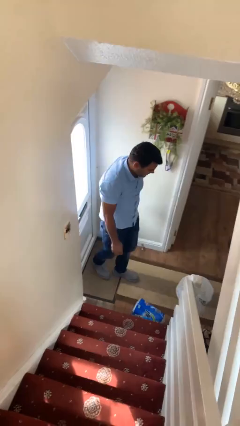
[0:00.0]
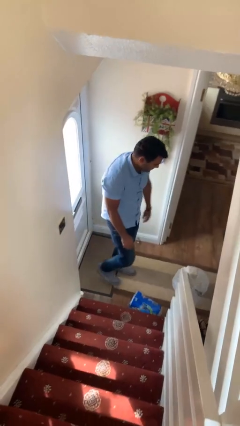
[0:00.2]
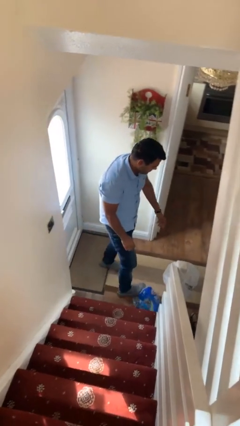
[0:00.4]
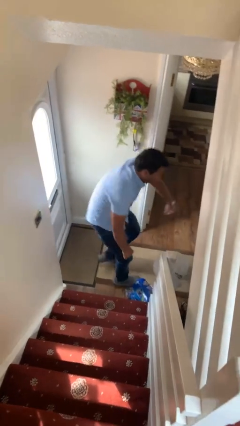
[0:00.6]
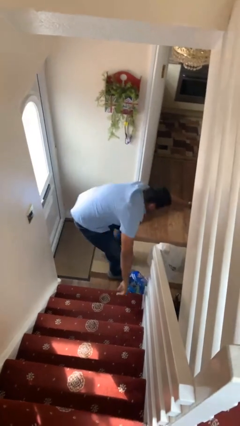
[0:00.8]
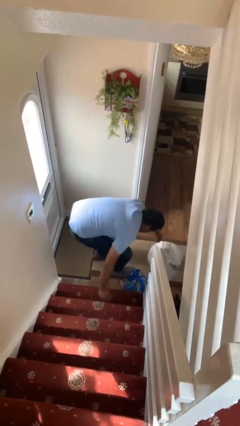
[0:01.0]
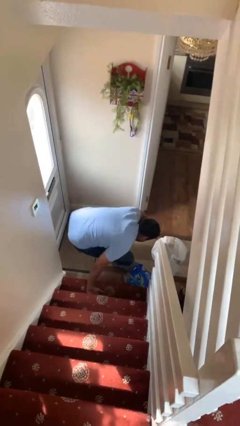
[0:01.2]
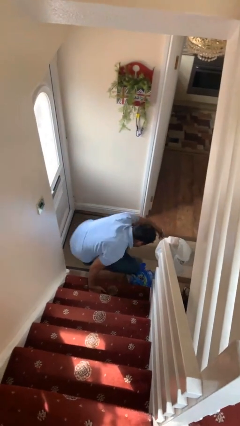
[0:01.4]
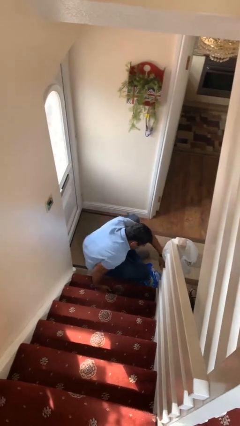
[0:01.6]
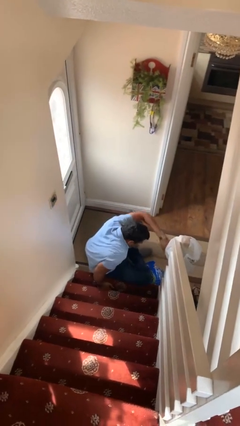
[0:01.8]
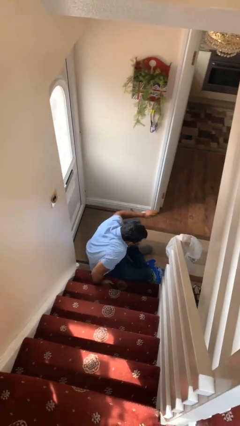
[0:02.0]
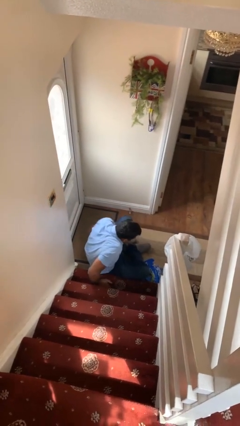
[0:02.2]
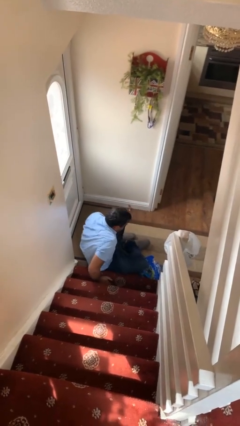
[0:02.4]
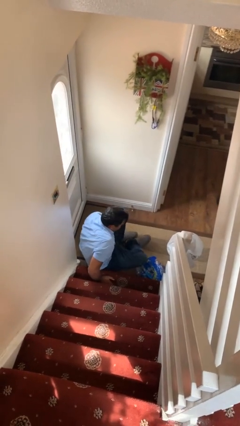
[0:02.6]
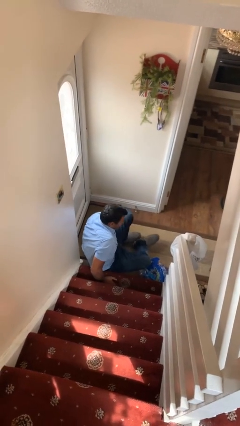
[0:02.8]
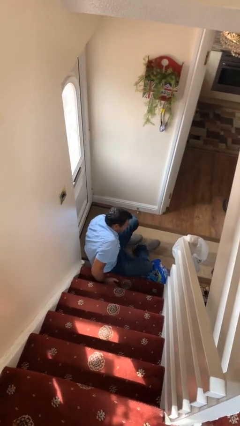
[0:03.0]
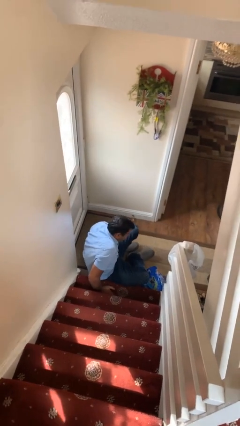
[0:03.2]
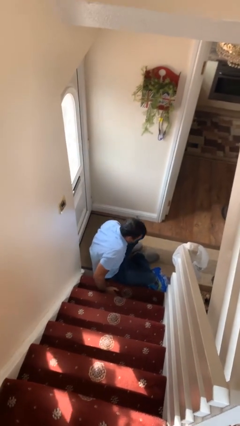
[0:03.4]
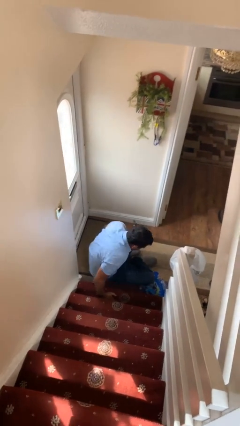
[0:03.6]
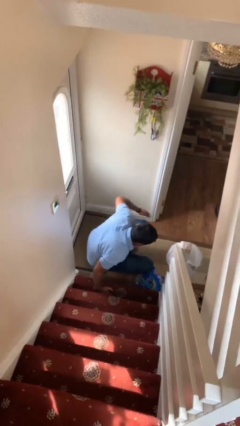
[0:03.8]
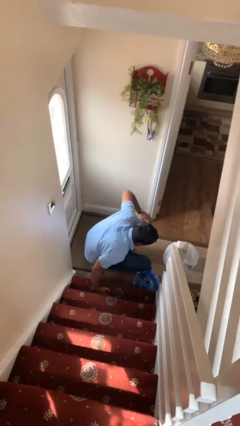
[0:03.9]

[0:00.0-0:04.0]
person trips on object on floor

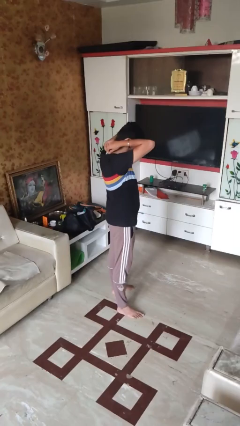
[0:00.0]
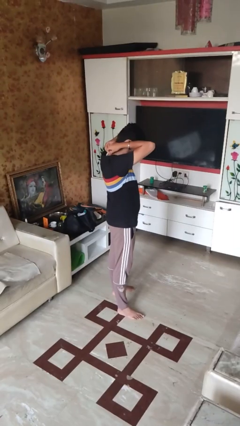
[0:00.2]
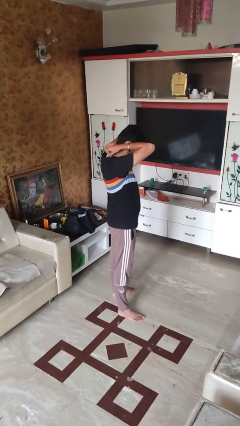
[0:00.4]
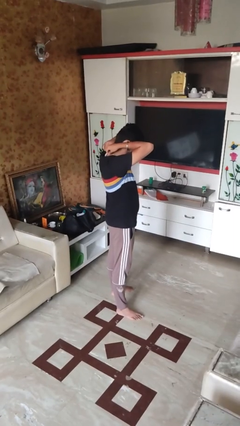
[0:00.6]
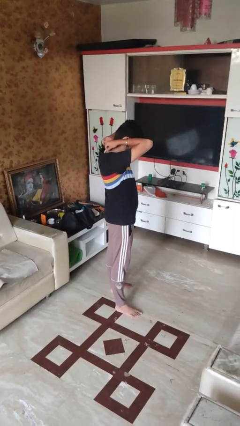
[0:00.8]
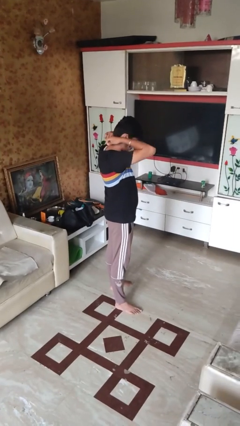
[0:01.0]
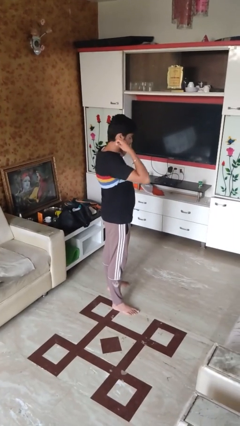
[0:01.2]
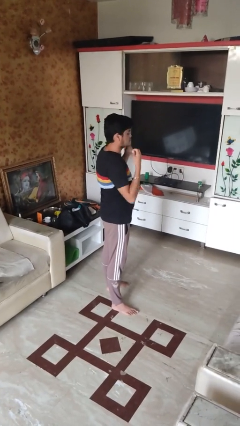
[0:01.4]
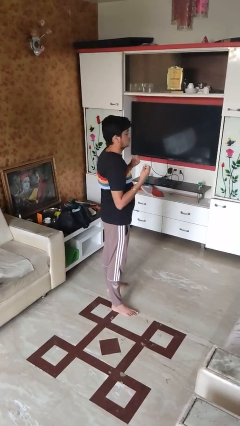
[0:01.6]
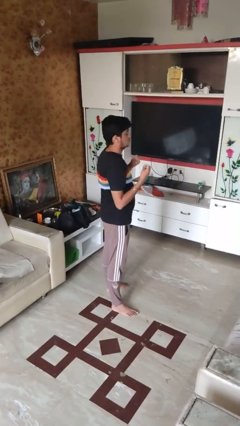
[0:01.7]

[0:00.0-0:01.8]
person takes off necklace

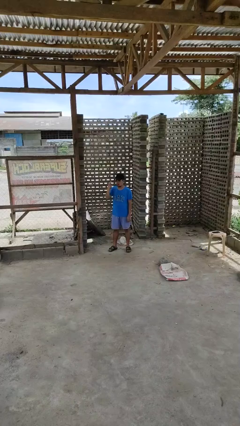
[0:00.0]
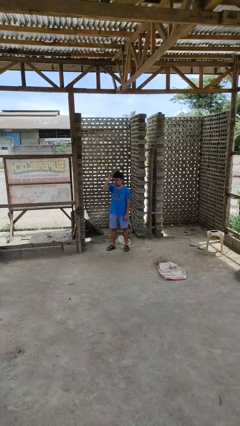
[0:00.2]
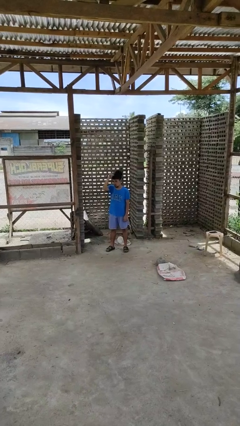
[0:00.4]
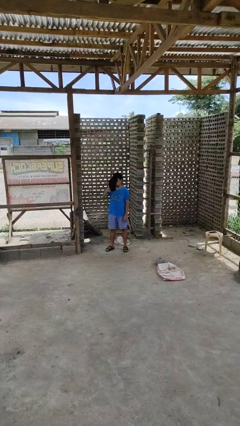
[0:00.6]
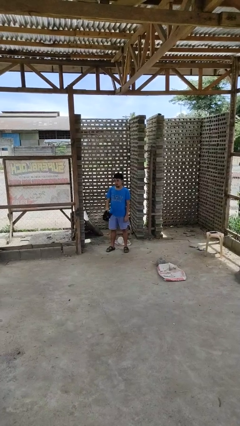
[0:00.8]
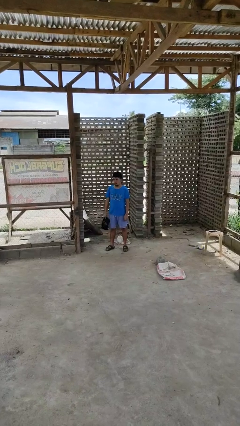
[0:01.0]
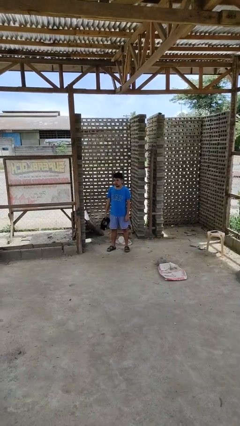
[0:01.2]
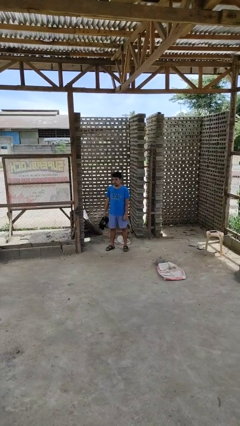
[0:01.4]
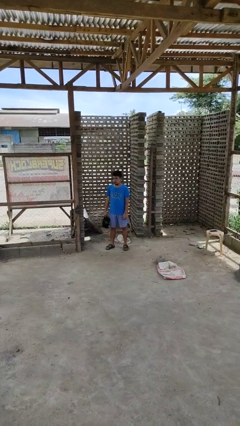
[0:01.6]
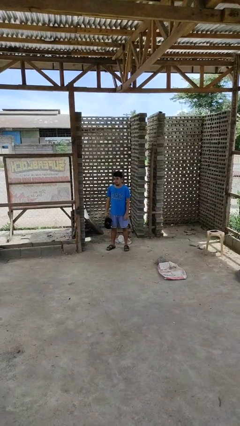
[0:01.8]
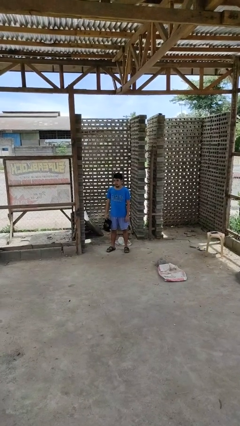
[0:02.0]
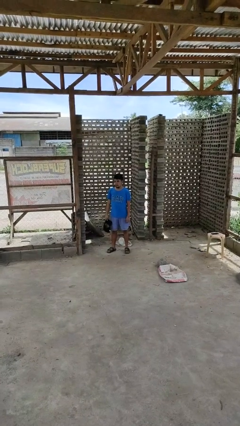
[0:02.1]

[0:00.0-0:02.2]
person takes off hat

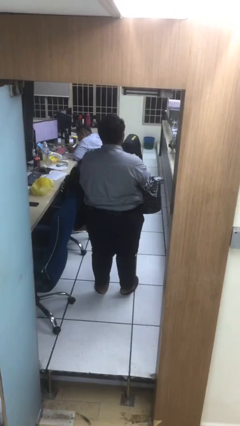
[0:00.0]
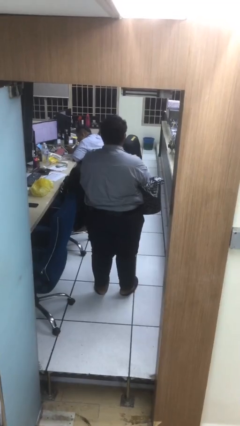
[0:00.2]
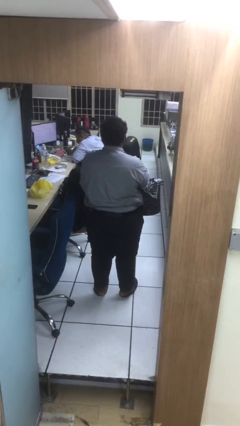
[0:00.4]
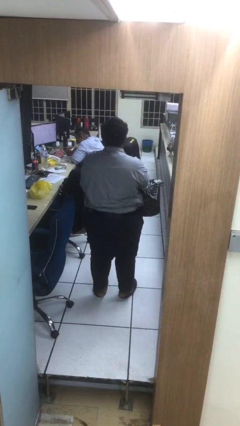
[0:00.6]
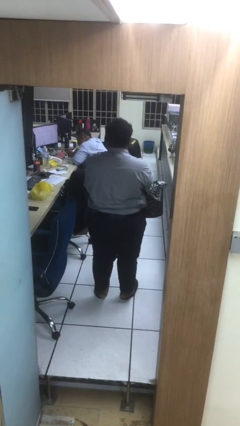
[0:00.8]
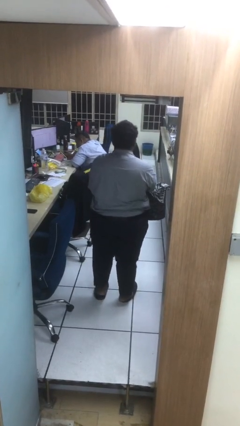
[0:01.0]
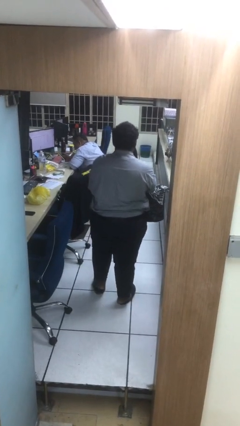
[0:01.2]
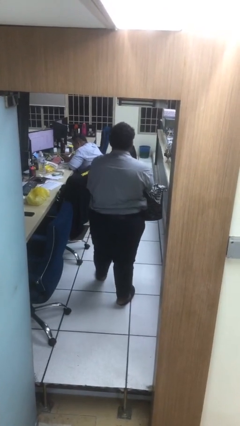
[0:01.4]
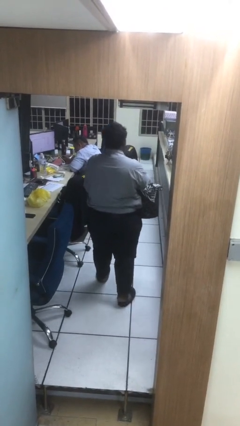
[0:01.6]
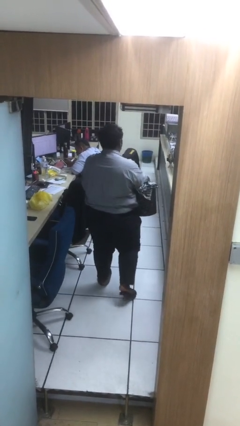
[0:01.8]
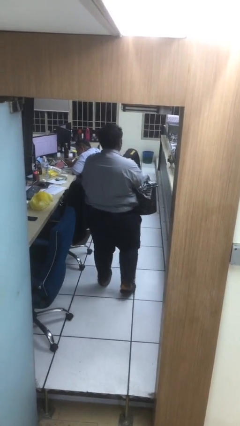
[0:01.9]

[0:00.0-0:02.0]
person carries laundry basket

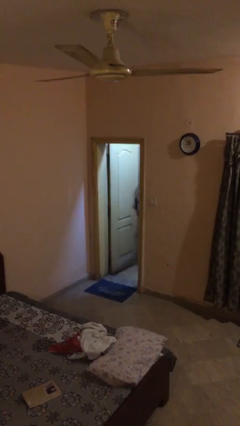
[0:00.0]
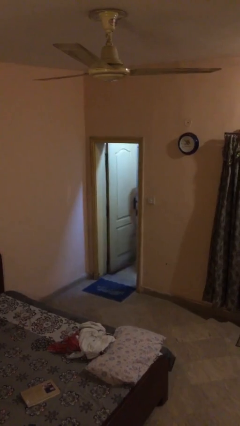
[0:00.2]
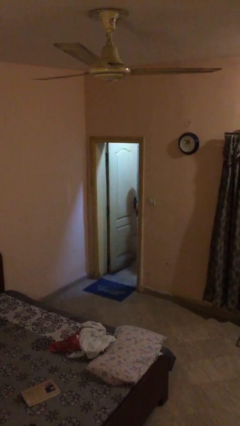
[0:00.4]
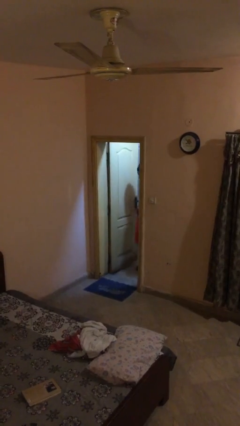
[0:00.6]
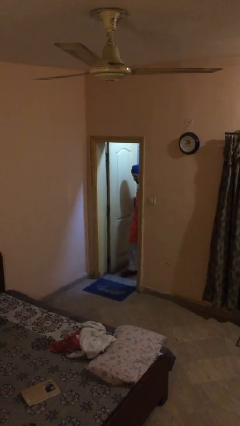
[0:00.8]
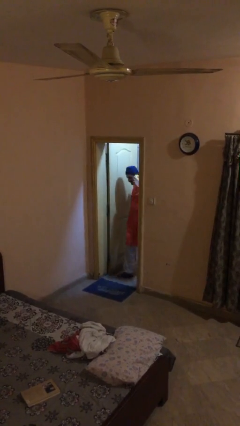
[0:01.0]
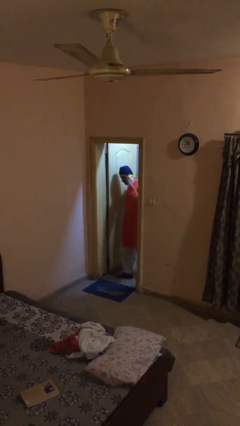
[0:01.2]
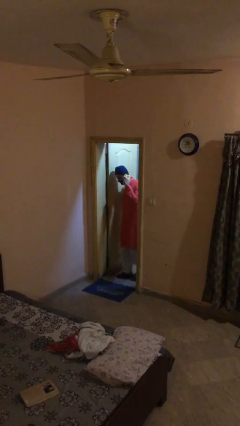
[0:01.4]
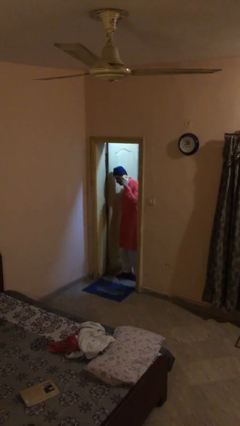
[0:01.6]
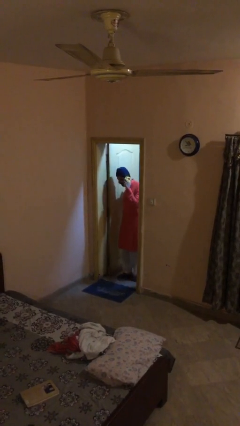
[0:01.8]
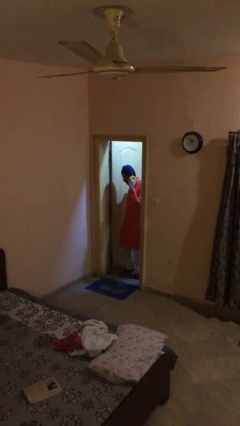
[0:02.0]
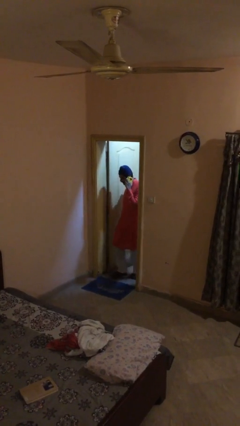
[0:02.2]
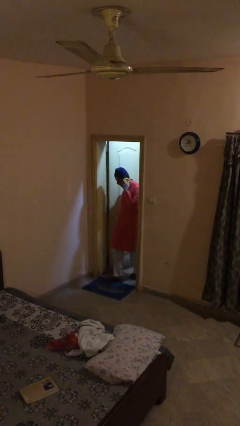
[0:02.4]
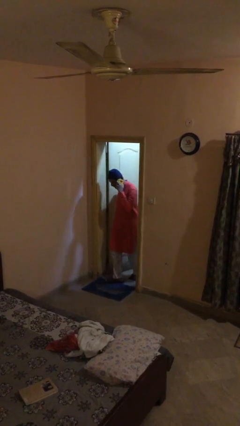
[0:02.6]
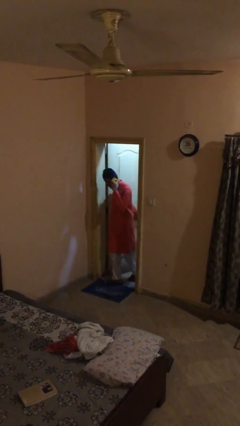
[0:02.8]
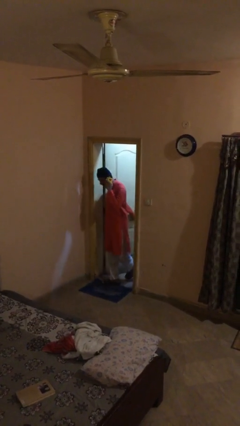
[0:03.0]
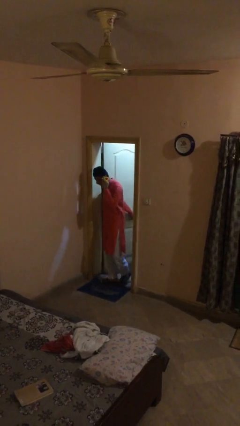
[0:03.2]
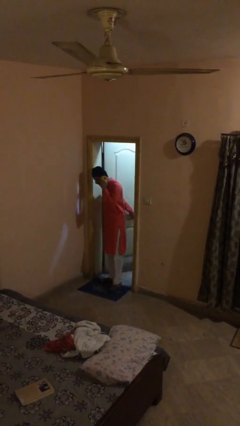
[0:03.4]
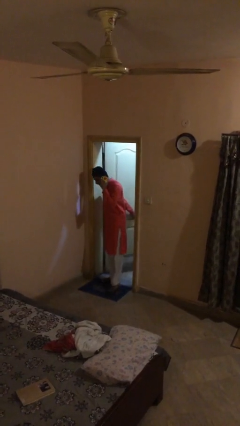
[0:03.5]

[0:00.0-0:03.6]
person enters scene through structure

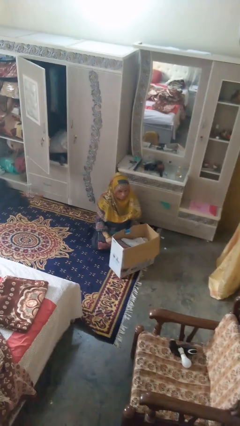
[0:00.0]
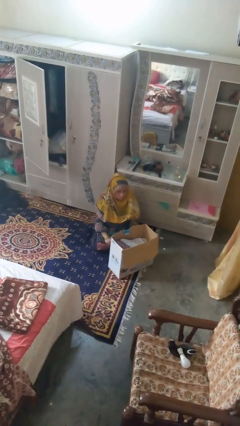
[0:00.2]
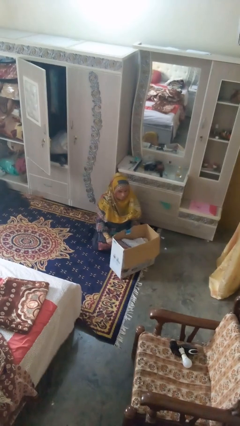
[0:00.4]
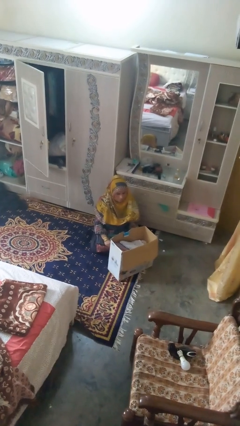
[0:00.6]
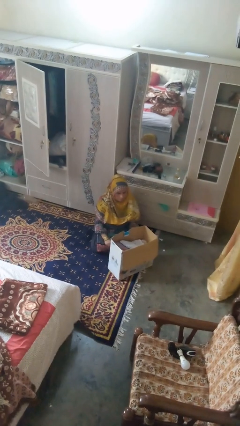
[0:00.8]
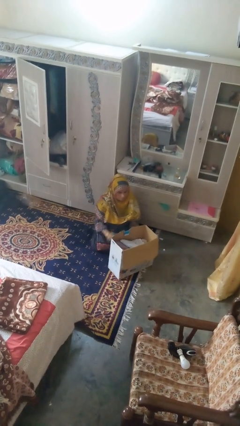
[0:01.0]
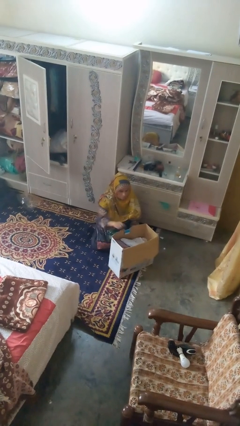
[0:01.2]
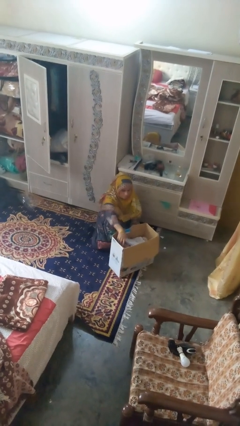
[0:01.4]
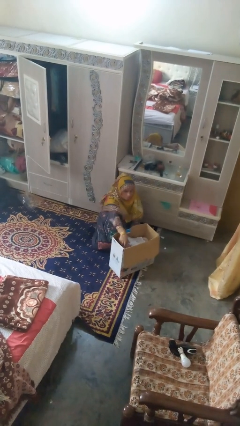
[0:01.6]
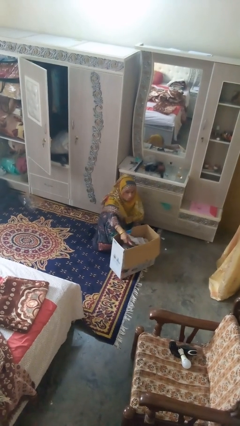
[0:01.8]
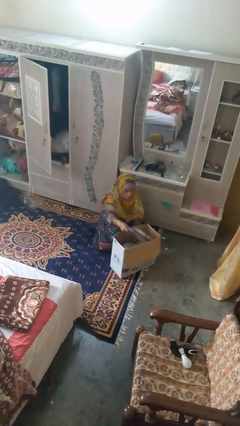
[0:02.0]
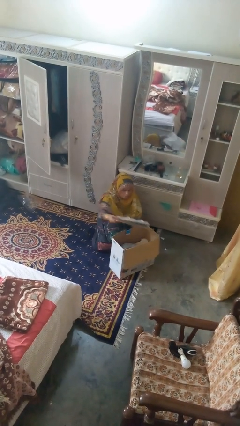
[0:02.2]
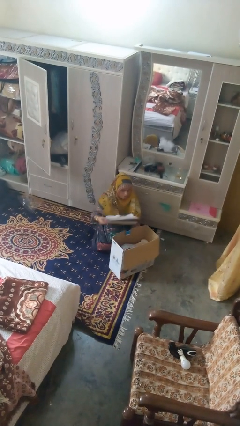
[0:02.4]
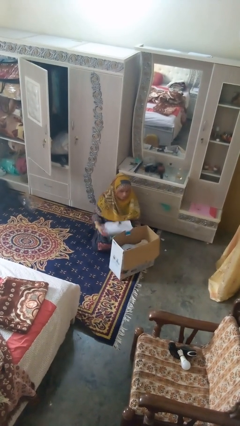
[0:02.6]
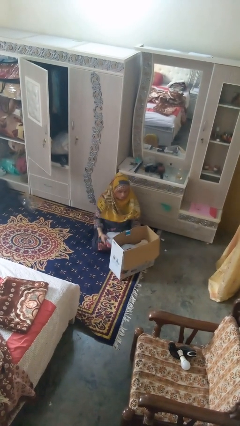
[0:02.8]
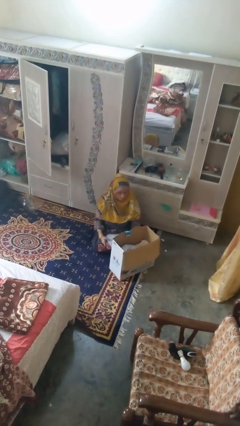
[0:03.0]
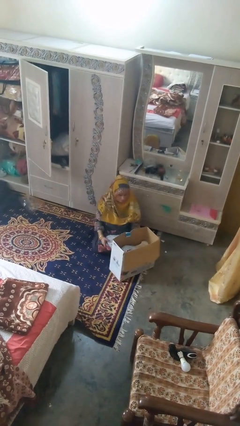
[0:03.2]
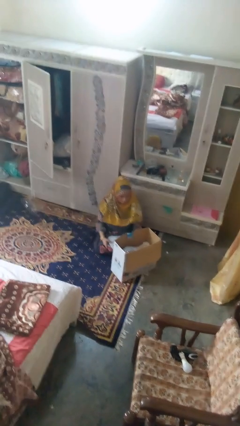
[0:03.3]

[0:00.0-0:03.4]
person takes object from box

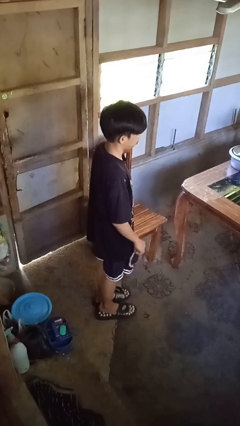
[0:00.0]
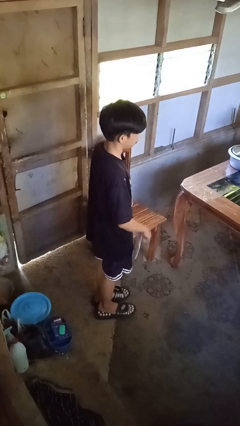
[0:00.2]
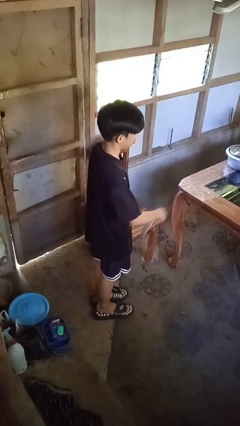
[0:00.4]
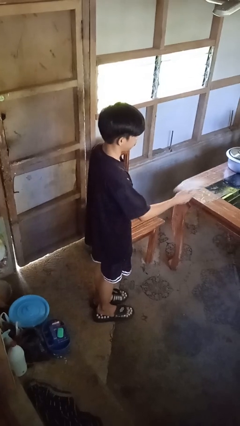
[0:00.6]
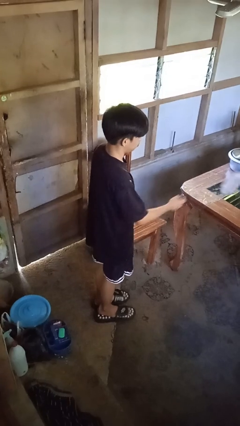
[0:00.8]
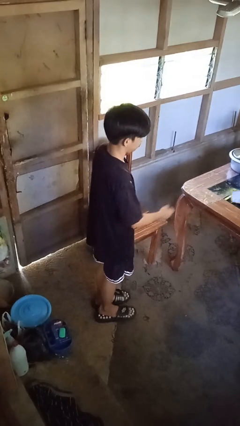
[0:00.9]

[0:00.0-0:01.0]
person throws object on table
